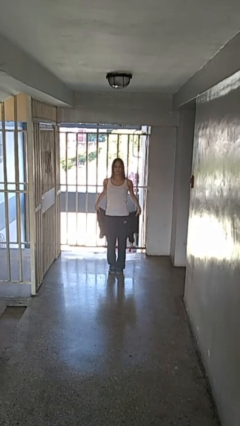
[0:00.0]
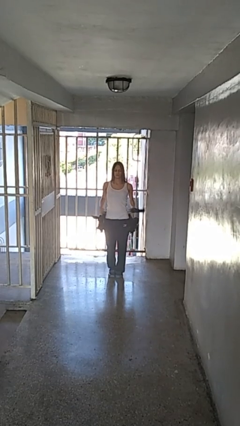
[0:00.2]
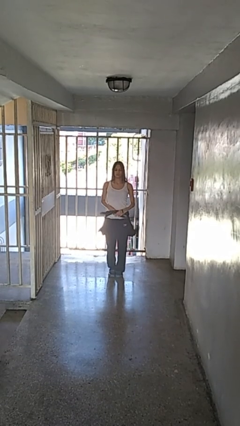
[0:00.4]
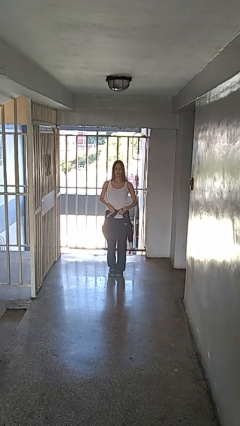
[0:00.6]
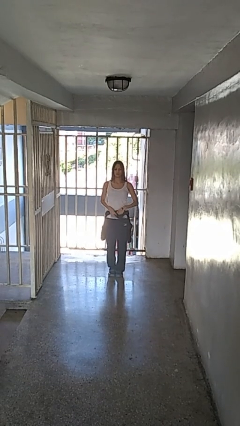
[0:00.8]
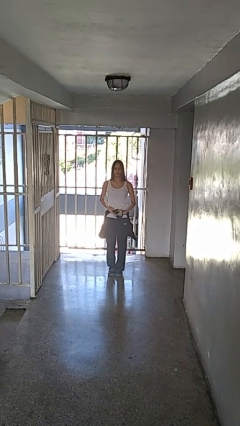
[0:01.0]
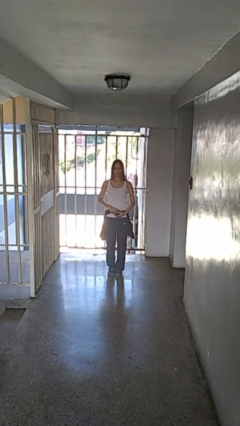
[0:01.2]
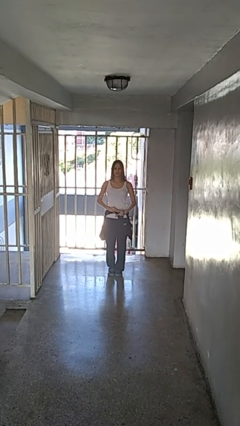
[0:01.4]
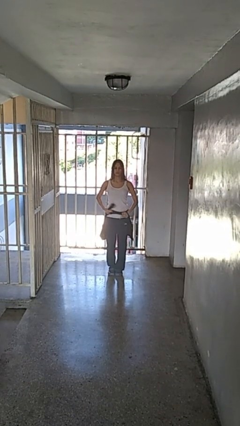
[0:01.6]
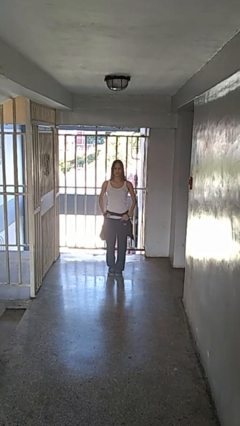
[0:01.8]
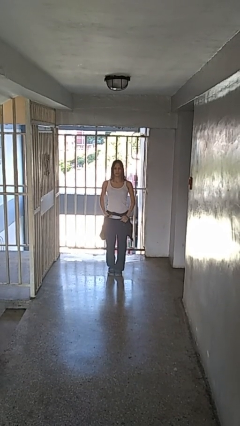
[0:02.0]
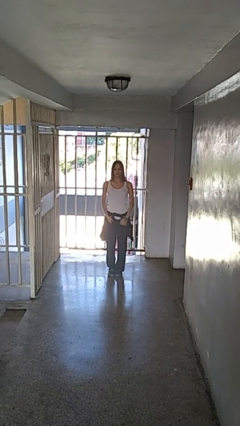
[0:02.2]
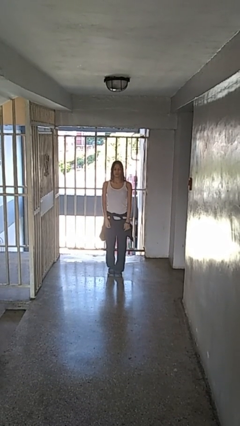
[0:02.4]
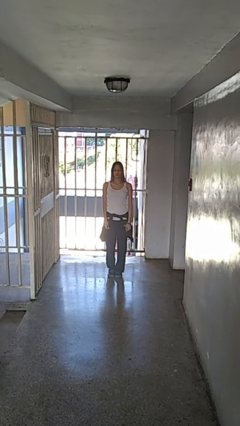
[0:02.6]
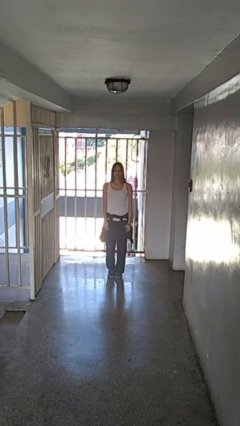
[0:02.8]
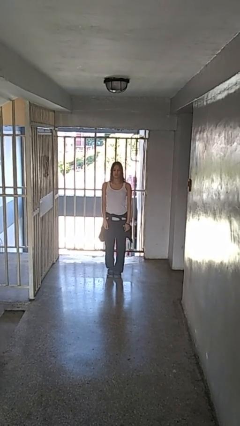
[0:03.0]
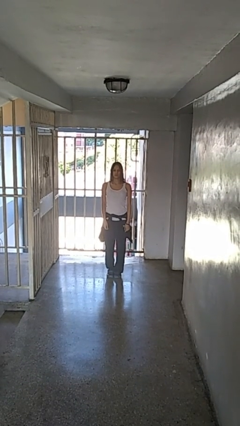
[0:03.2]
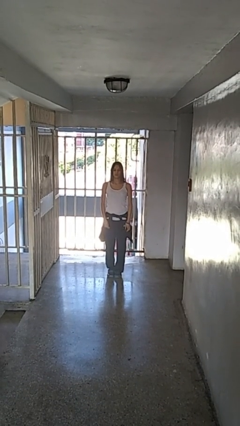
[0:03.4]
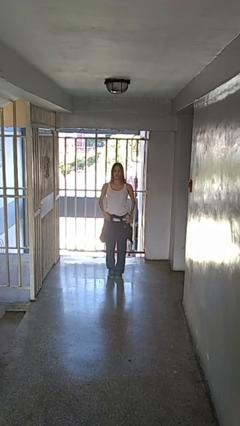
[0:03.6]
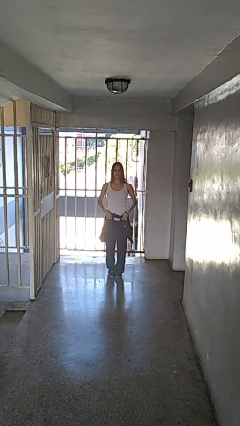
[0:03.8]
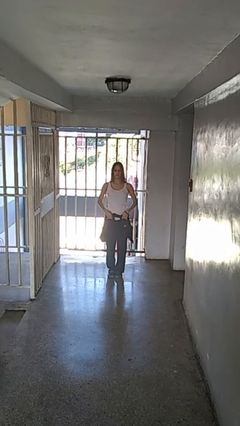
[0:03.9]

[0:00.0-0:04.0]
person ties jacket around waist

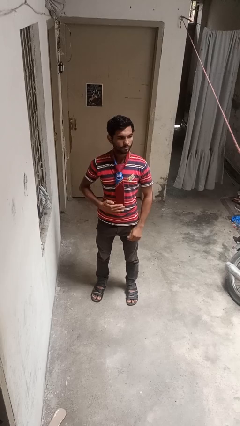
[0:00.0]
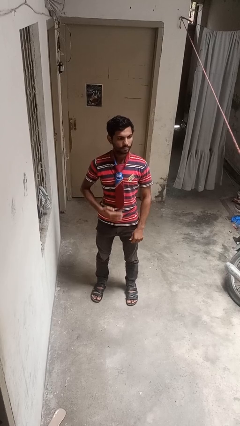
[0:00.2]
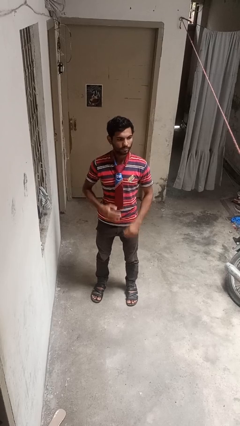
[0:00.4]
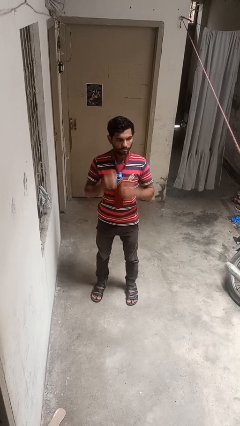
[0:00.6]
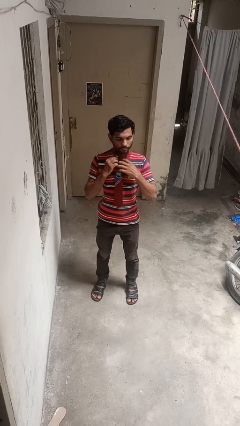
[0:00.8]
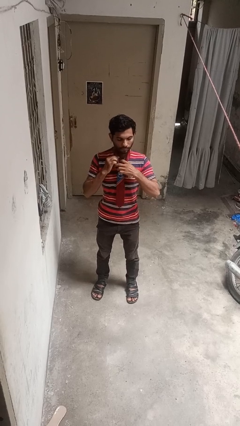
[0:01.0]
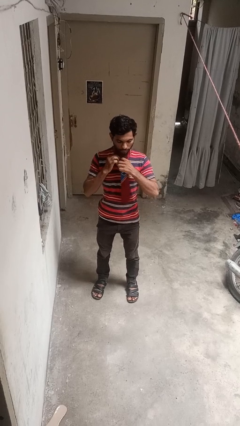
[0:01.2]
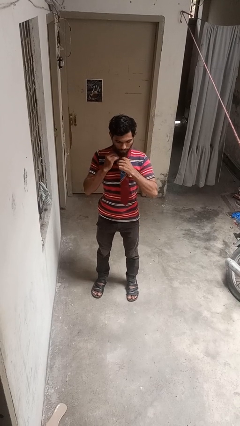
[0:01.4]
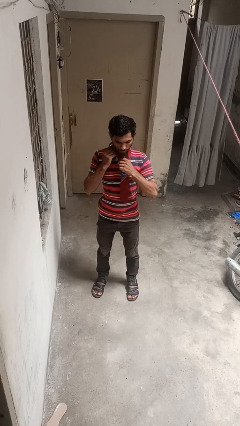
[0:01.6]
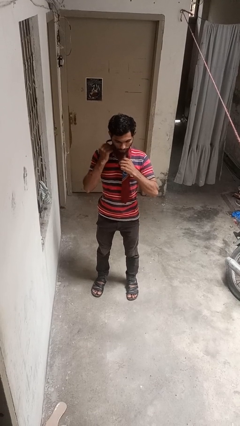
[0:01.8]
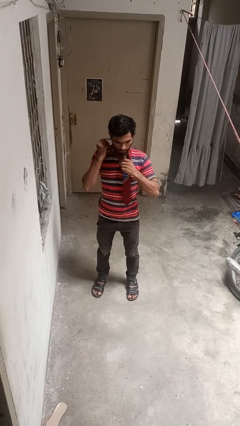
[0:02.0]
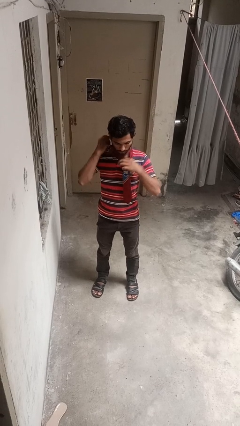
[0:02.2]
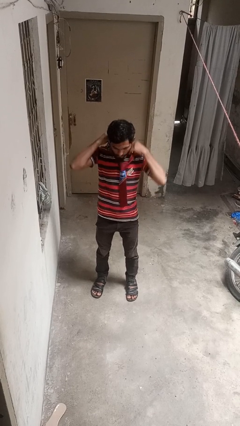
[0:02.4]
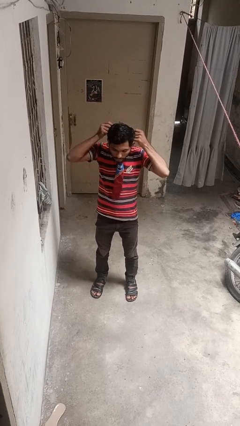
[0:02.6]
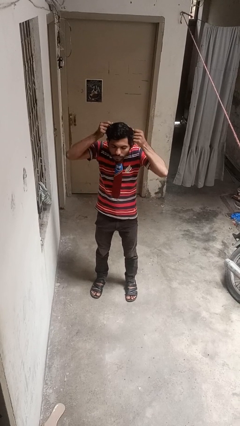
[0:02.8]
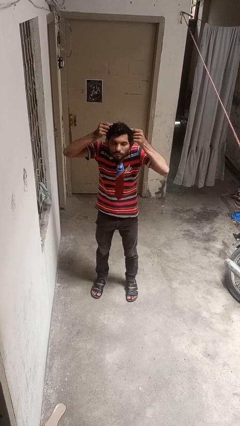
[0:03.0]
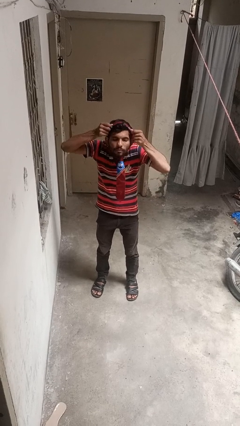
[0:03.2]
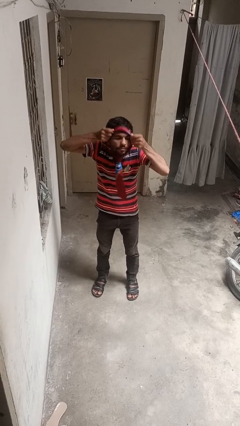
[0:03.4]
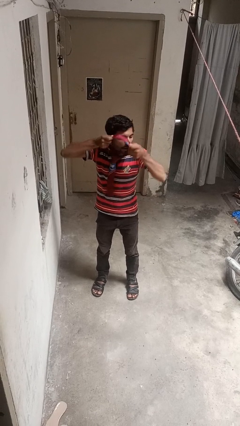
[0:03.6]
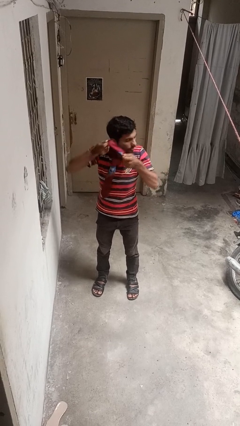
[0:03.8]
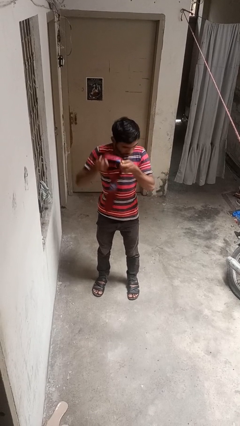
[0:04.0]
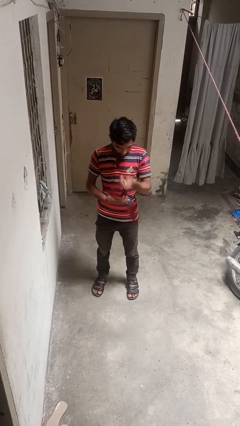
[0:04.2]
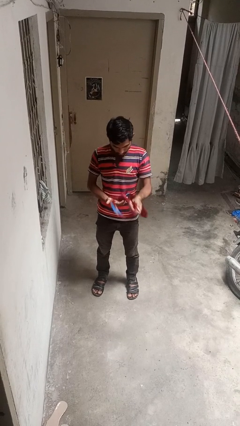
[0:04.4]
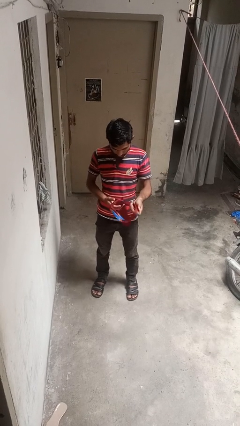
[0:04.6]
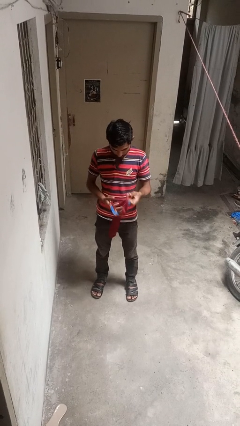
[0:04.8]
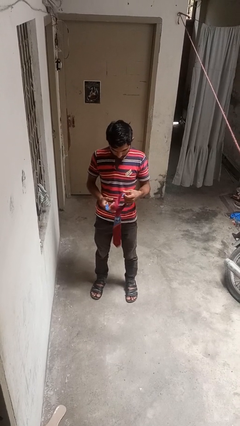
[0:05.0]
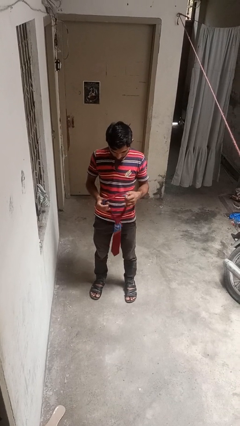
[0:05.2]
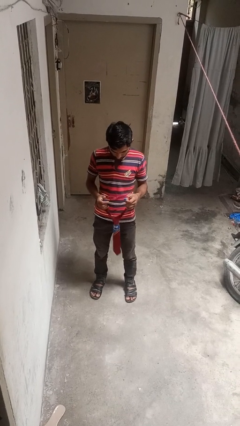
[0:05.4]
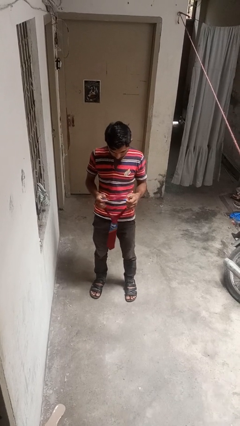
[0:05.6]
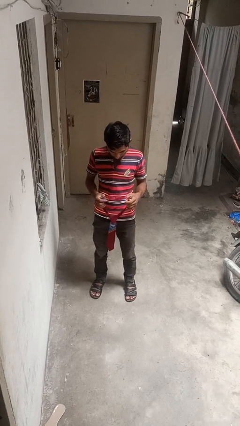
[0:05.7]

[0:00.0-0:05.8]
person takes off necktie

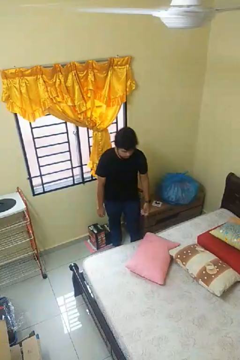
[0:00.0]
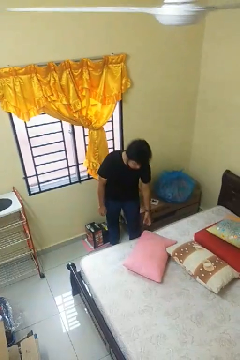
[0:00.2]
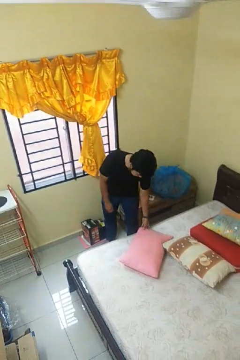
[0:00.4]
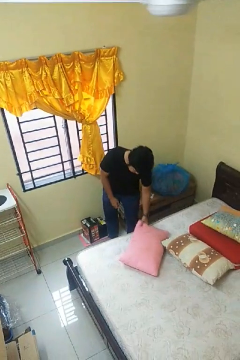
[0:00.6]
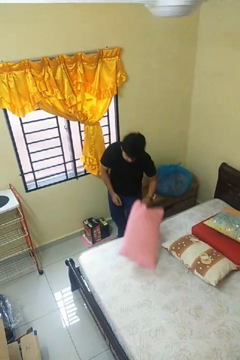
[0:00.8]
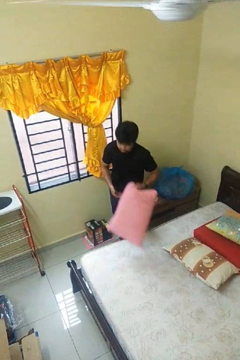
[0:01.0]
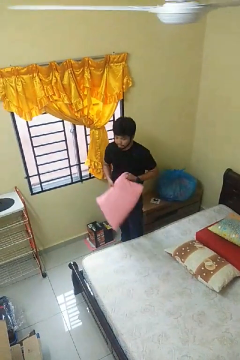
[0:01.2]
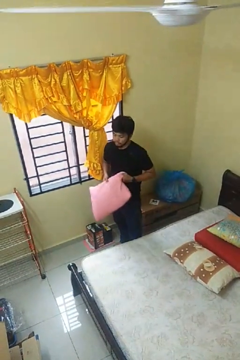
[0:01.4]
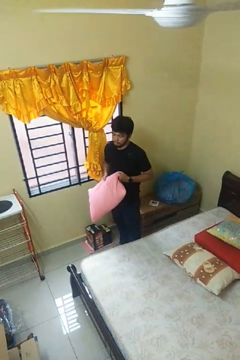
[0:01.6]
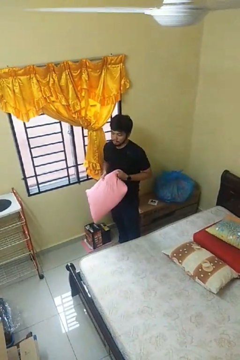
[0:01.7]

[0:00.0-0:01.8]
person picks up object from bed

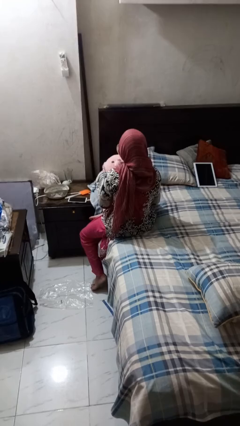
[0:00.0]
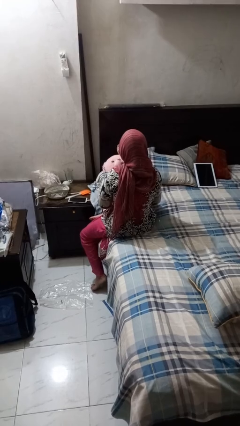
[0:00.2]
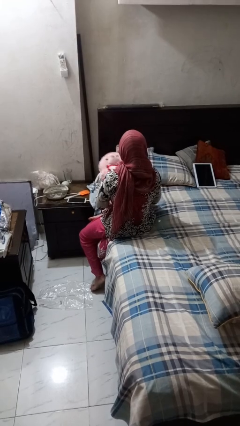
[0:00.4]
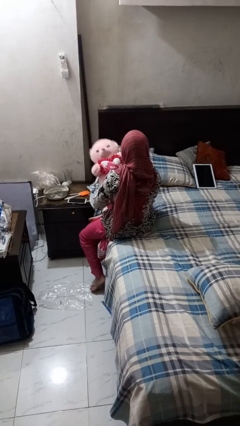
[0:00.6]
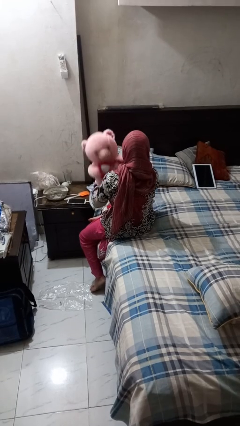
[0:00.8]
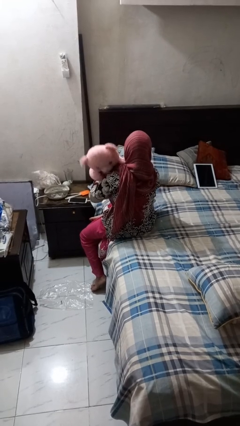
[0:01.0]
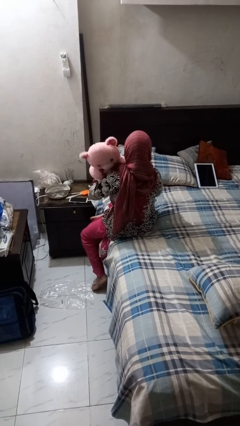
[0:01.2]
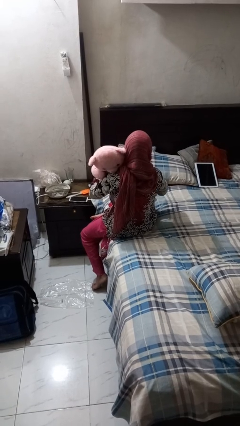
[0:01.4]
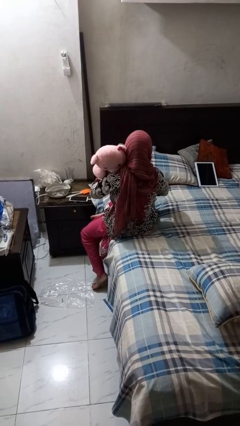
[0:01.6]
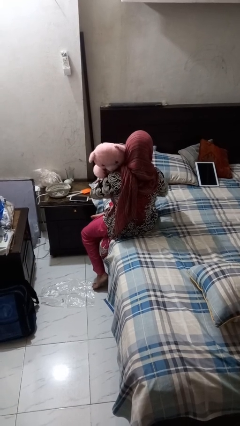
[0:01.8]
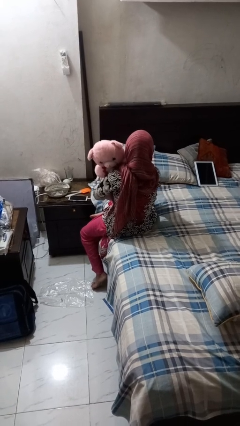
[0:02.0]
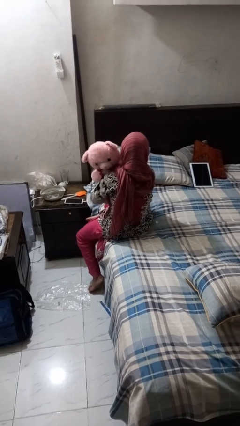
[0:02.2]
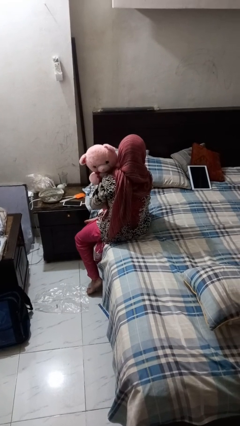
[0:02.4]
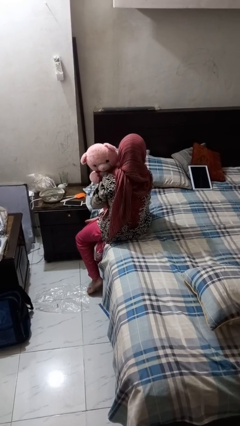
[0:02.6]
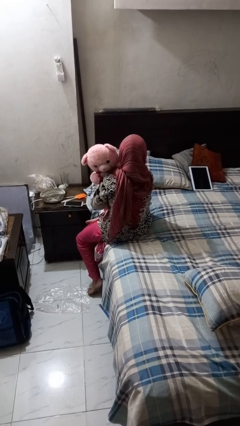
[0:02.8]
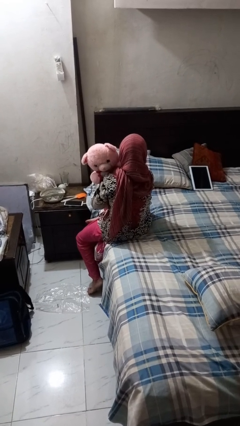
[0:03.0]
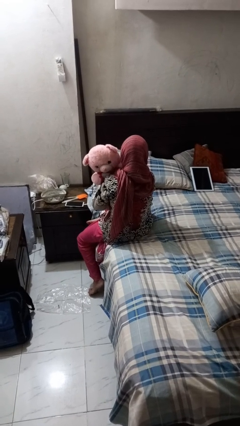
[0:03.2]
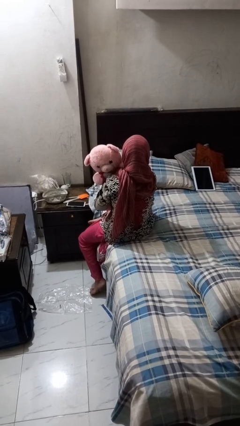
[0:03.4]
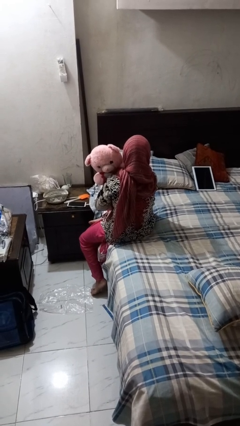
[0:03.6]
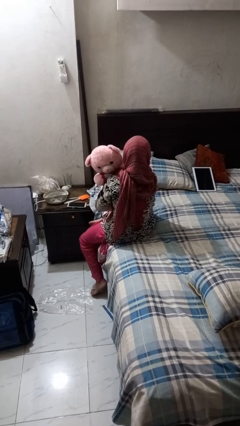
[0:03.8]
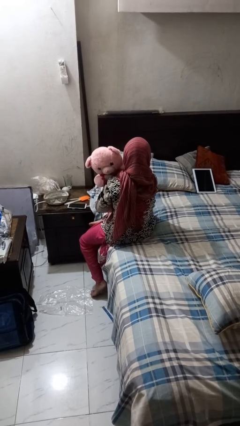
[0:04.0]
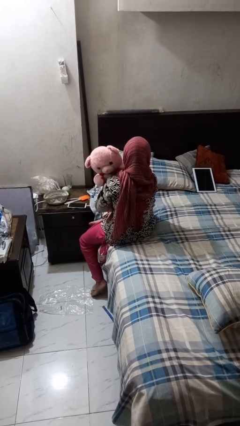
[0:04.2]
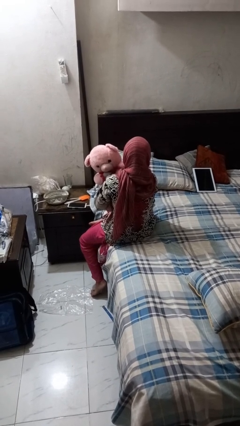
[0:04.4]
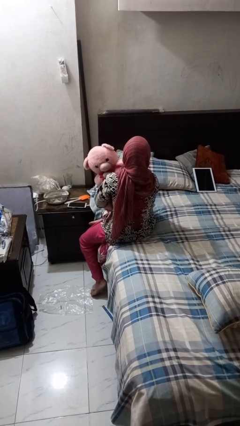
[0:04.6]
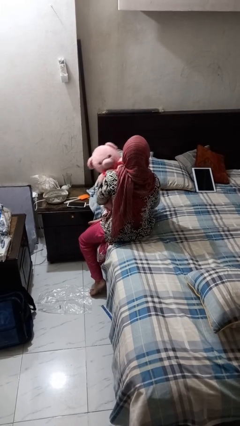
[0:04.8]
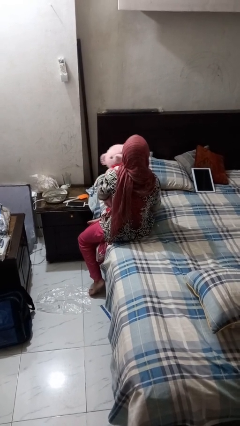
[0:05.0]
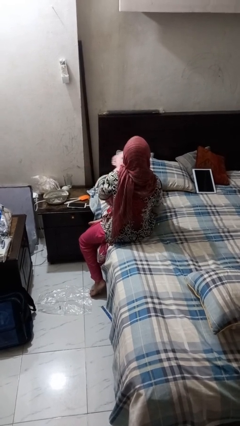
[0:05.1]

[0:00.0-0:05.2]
person hugs stuffed animal

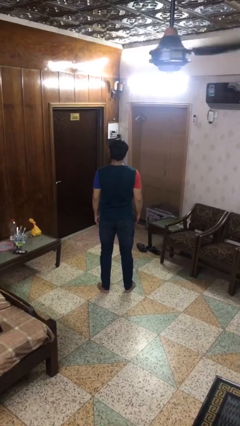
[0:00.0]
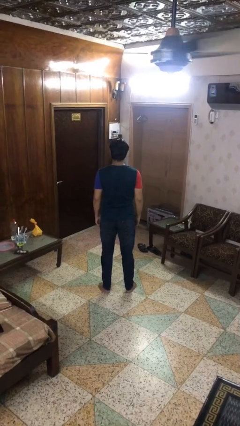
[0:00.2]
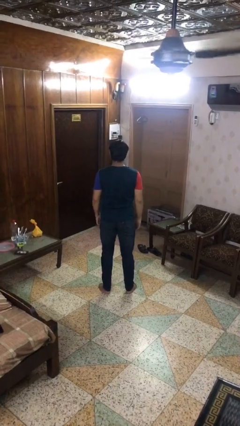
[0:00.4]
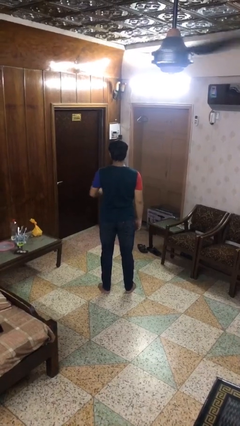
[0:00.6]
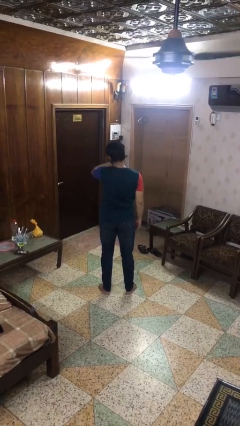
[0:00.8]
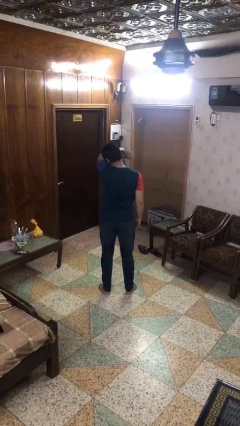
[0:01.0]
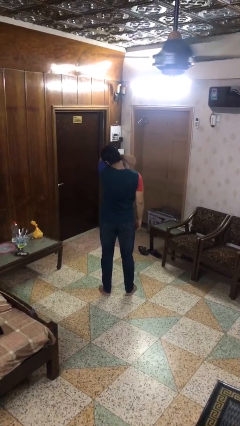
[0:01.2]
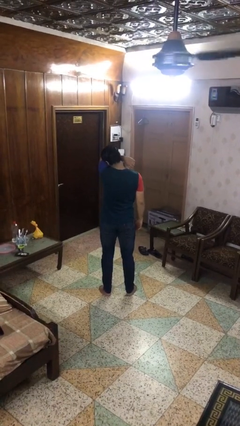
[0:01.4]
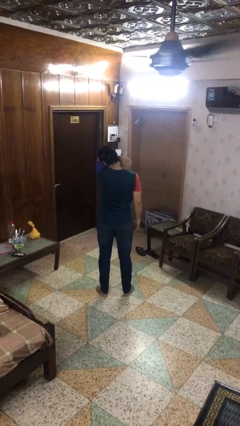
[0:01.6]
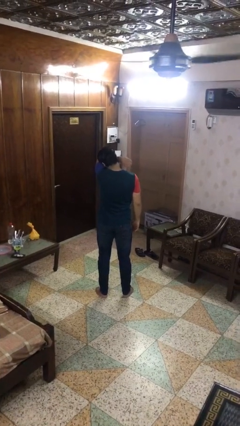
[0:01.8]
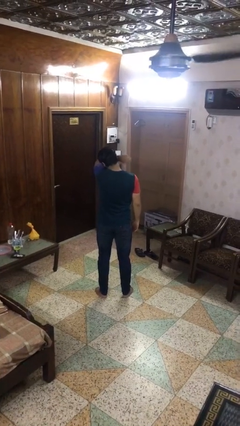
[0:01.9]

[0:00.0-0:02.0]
person sneezes into arm
